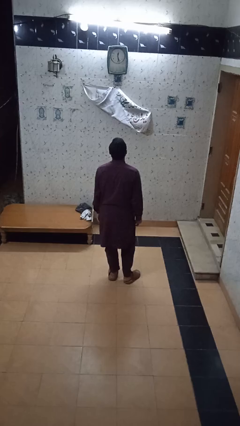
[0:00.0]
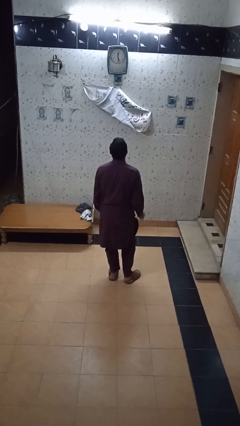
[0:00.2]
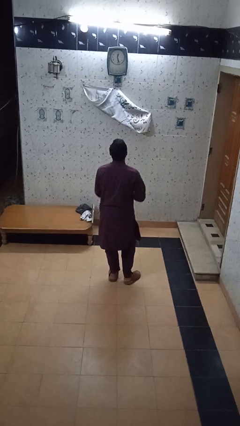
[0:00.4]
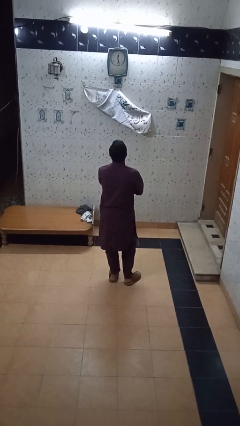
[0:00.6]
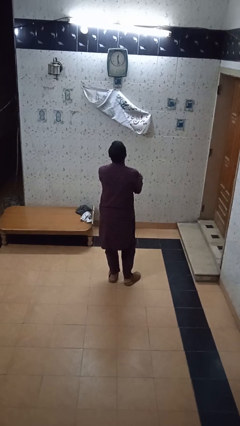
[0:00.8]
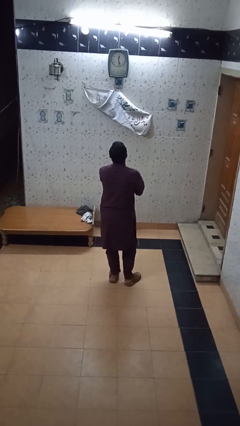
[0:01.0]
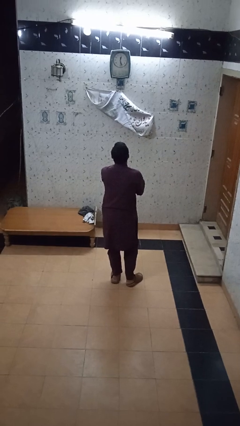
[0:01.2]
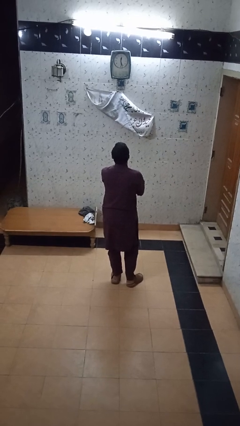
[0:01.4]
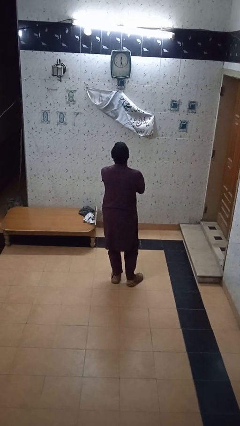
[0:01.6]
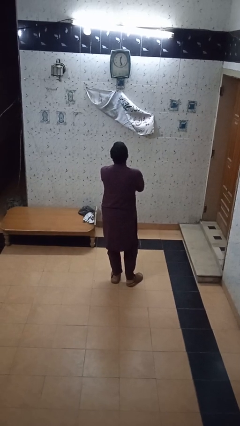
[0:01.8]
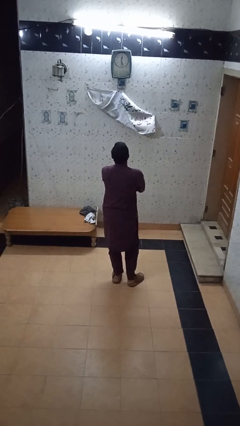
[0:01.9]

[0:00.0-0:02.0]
person crosses arms

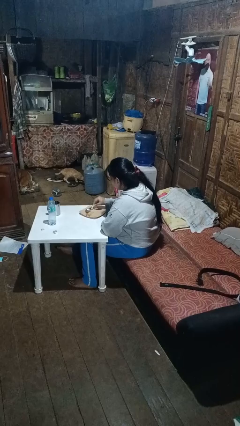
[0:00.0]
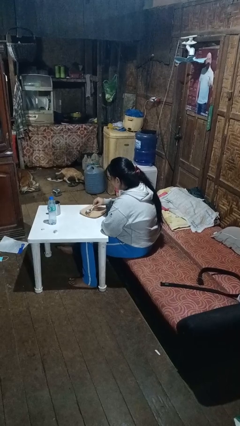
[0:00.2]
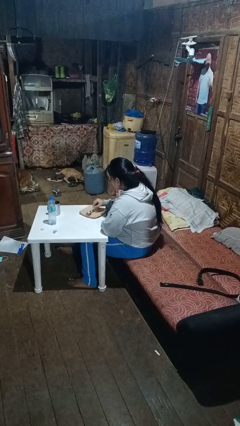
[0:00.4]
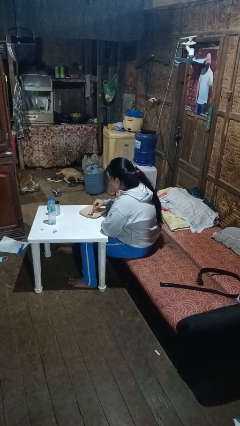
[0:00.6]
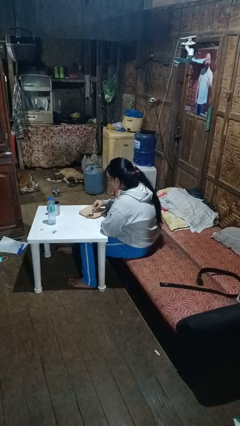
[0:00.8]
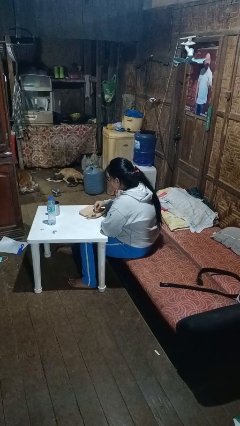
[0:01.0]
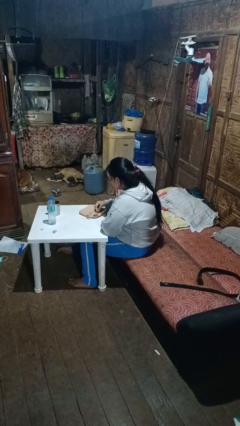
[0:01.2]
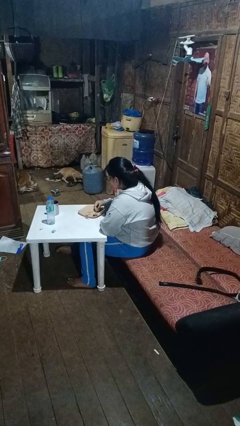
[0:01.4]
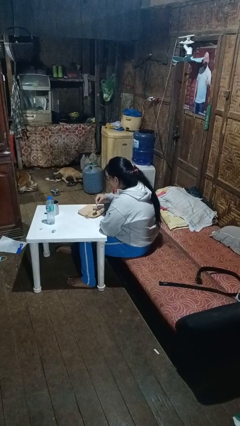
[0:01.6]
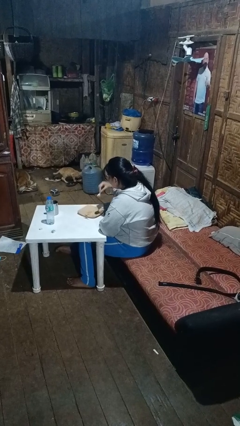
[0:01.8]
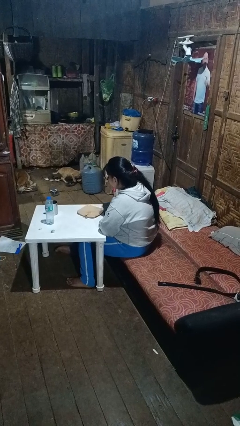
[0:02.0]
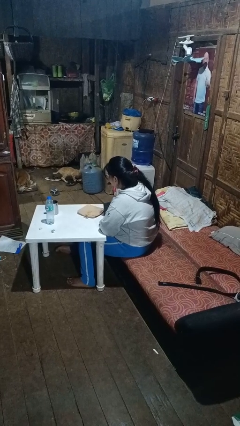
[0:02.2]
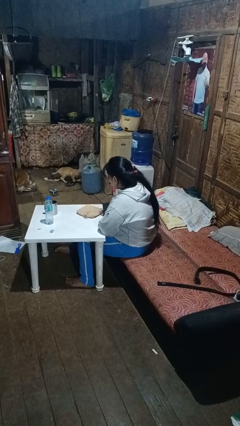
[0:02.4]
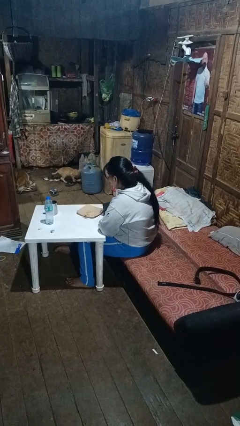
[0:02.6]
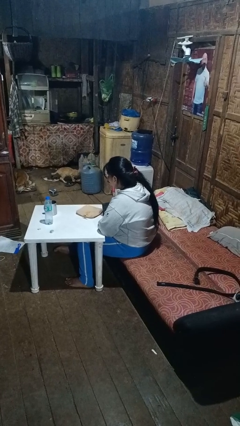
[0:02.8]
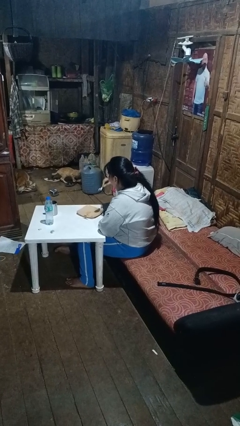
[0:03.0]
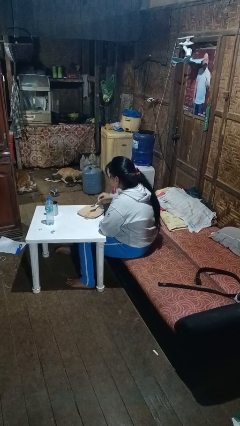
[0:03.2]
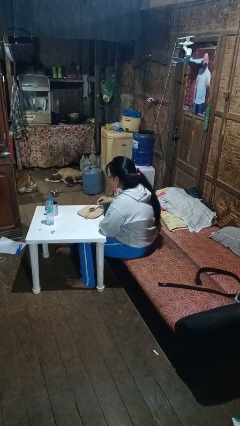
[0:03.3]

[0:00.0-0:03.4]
person eats with utensil

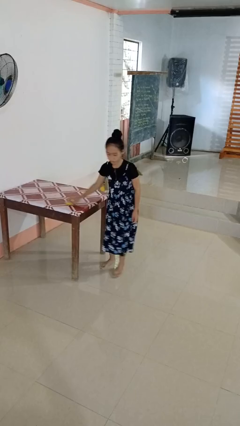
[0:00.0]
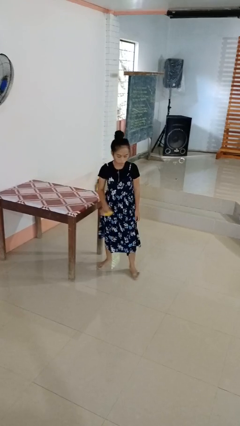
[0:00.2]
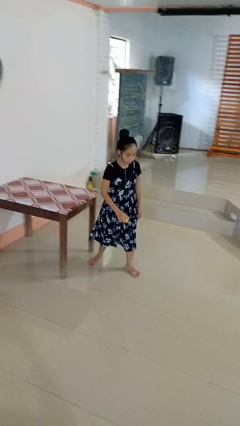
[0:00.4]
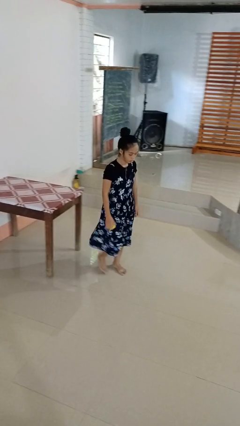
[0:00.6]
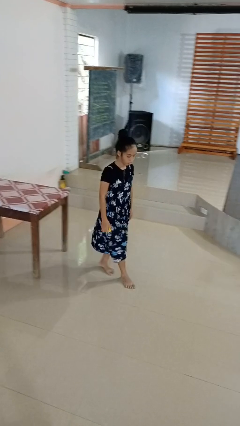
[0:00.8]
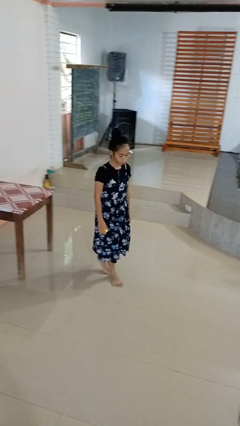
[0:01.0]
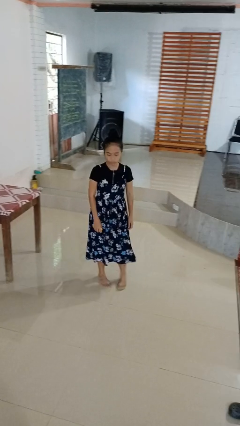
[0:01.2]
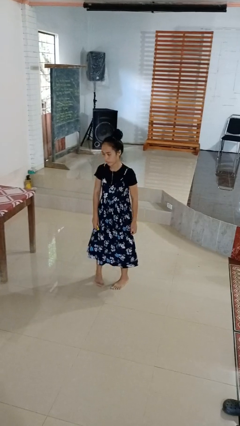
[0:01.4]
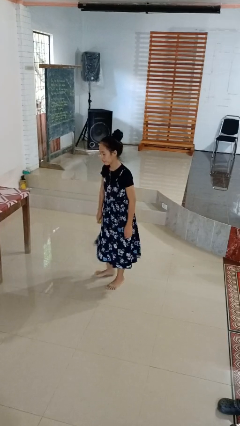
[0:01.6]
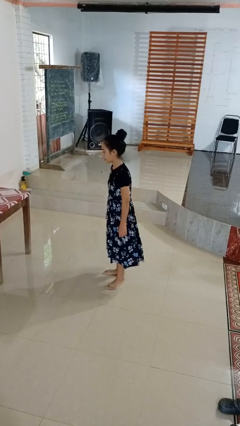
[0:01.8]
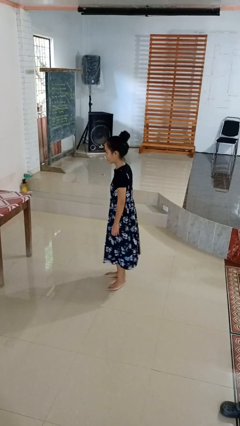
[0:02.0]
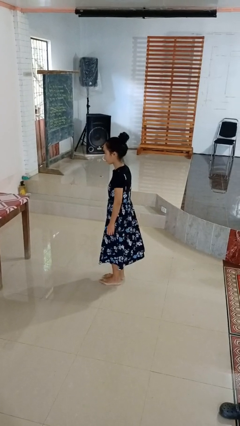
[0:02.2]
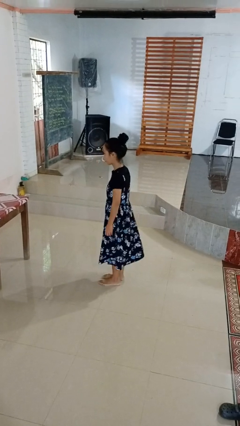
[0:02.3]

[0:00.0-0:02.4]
person picks up object from table

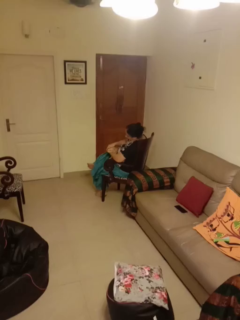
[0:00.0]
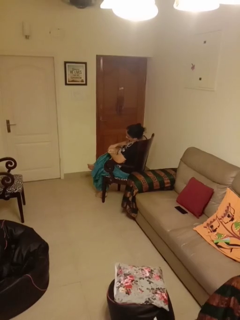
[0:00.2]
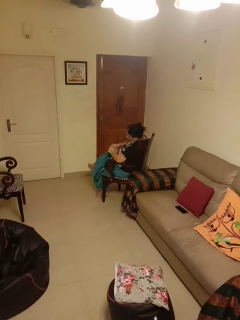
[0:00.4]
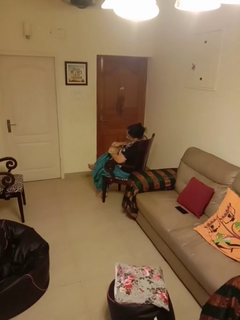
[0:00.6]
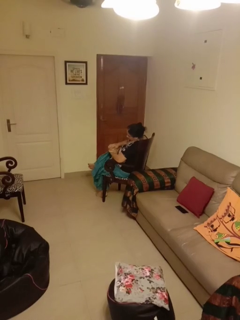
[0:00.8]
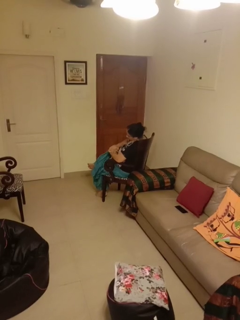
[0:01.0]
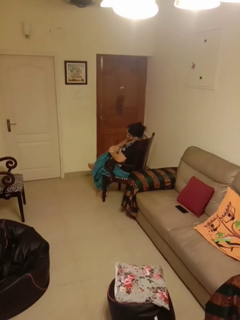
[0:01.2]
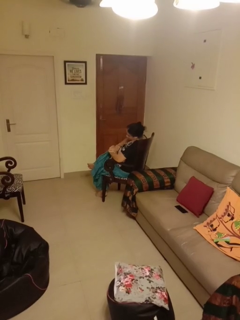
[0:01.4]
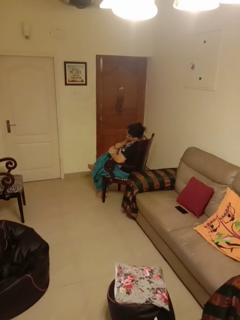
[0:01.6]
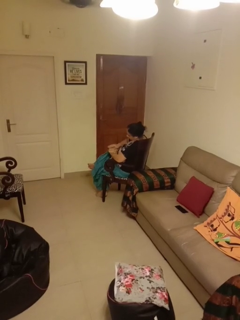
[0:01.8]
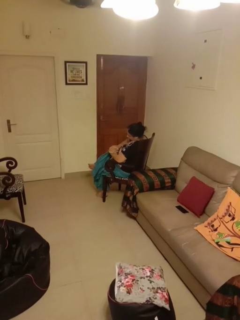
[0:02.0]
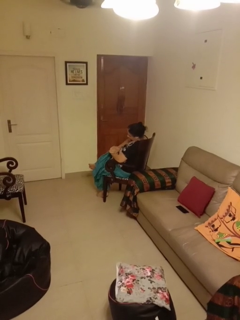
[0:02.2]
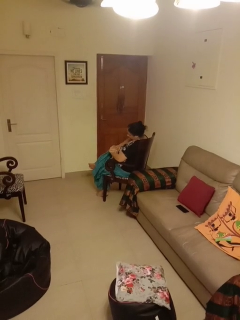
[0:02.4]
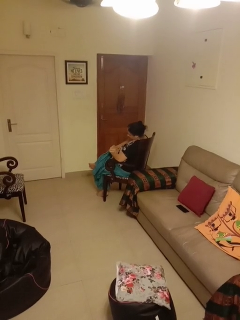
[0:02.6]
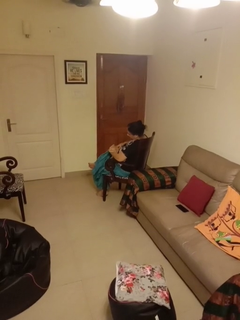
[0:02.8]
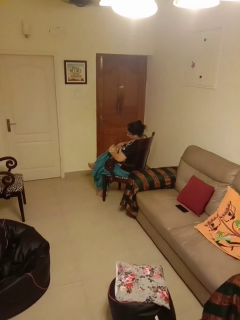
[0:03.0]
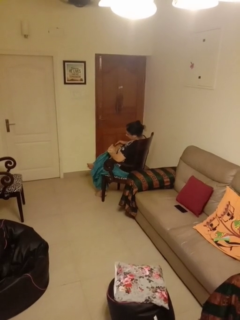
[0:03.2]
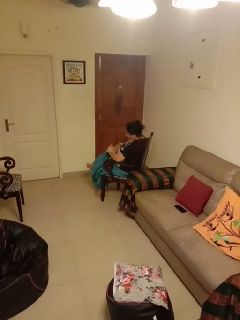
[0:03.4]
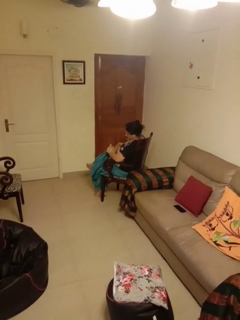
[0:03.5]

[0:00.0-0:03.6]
person pets cat

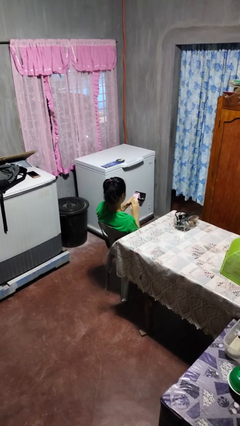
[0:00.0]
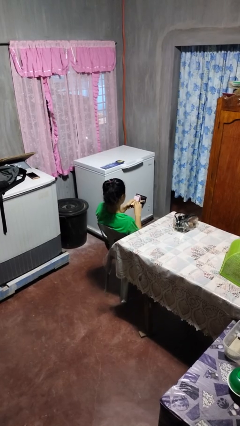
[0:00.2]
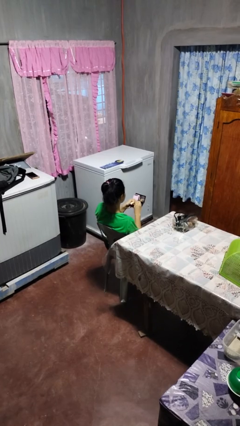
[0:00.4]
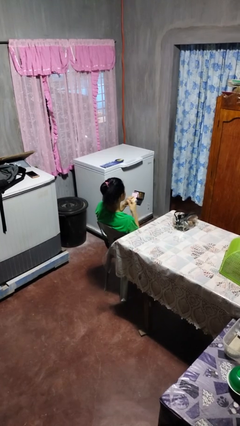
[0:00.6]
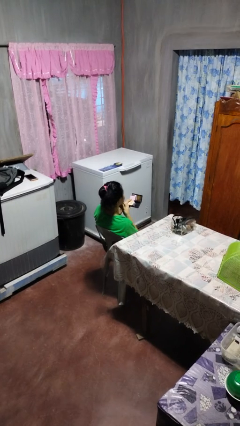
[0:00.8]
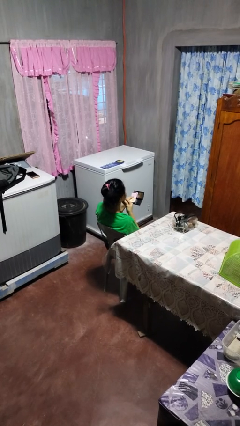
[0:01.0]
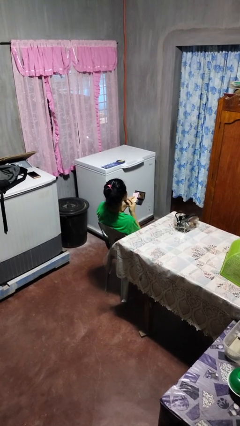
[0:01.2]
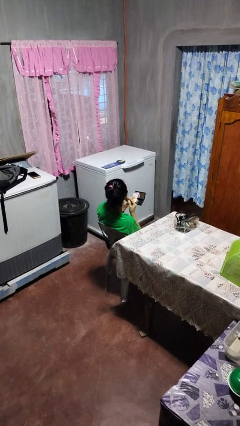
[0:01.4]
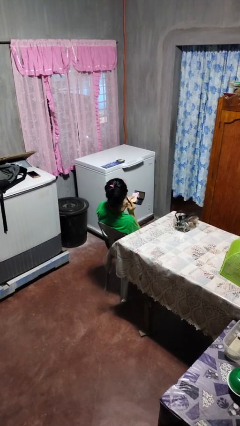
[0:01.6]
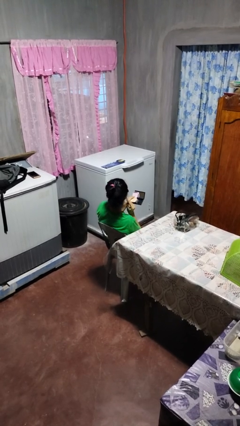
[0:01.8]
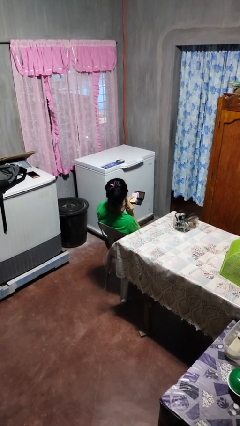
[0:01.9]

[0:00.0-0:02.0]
person applies foundation makeup

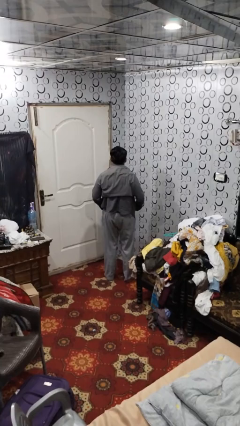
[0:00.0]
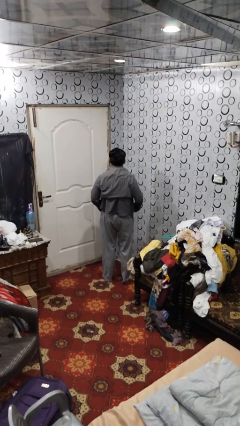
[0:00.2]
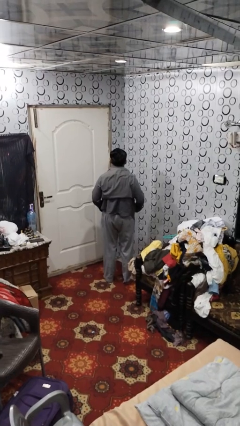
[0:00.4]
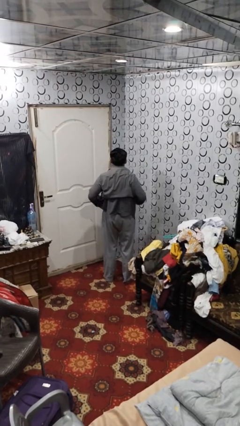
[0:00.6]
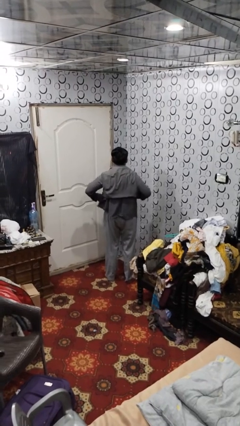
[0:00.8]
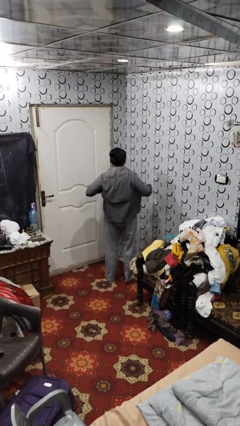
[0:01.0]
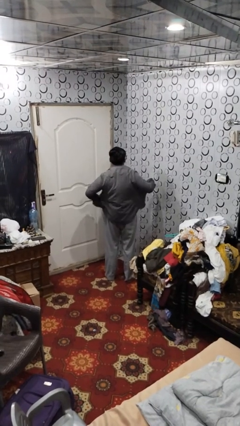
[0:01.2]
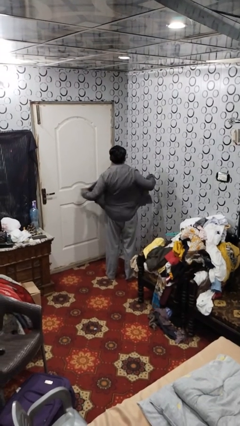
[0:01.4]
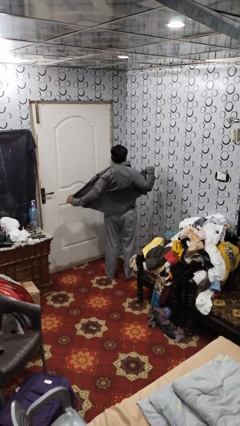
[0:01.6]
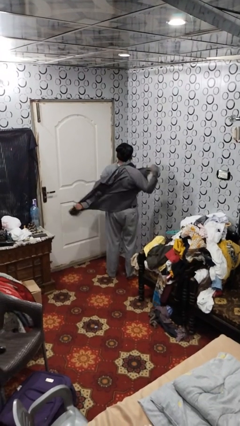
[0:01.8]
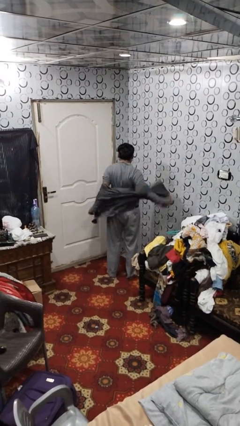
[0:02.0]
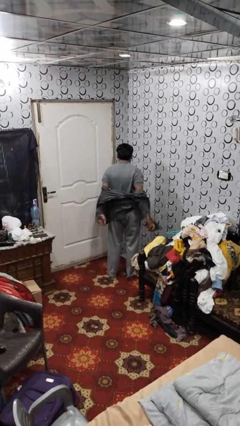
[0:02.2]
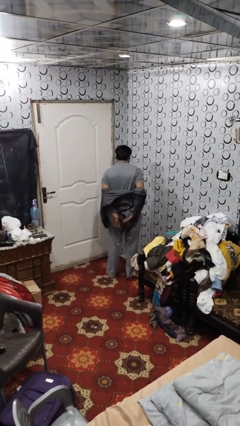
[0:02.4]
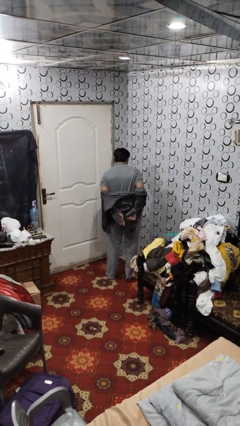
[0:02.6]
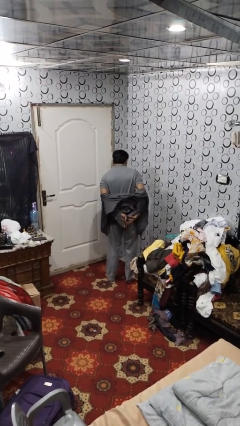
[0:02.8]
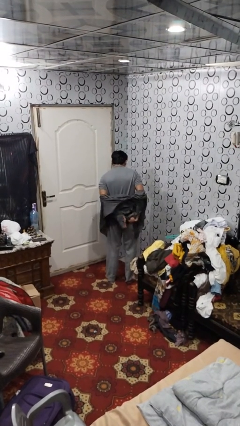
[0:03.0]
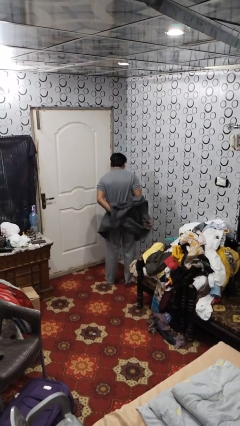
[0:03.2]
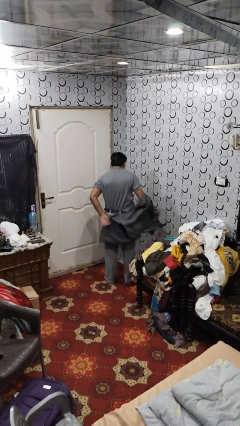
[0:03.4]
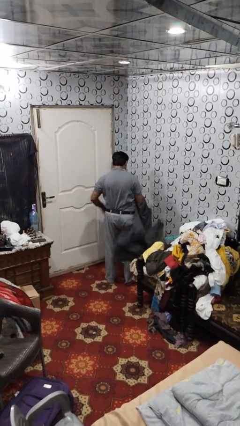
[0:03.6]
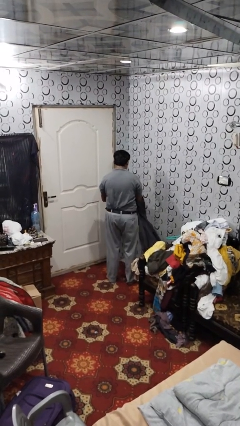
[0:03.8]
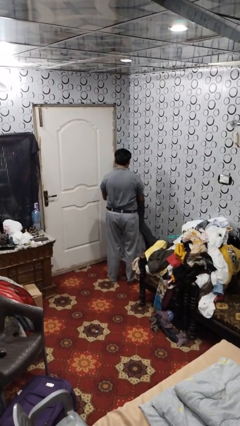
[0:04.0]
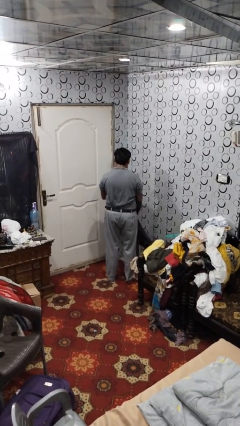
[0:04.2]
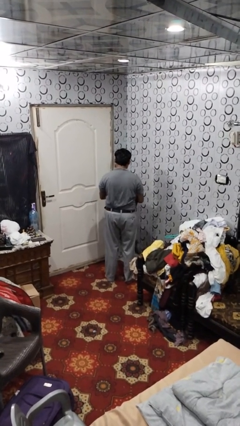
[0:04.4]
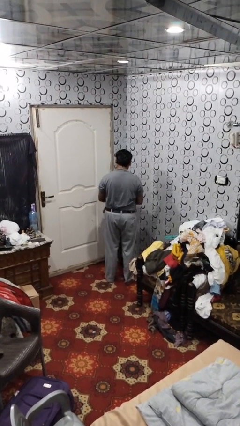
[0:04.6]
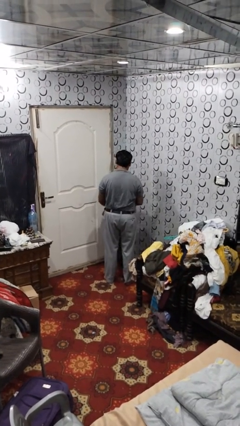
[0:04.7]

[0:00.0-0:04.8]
person takes off shirt
